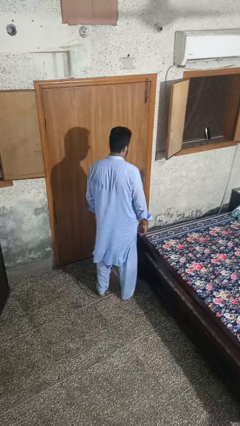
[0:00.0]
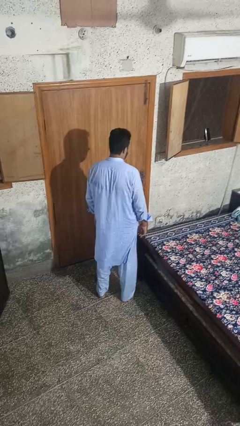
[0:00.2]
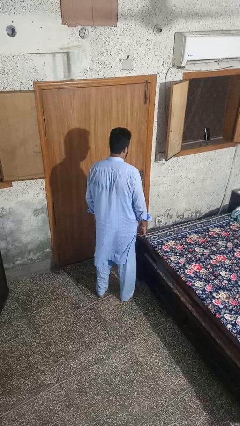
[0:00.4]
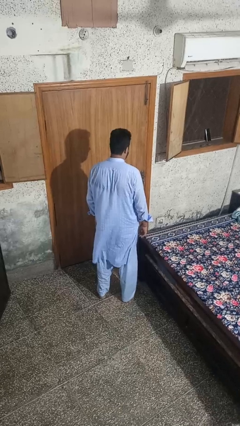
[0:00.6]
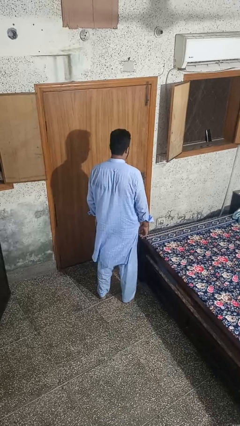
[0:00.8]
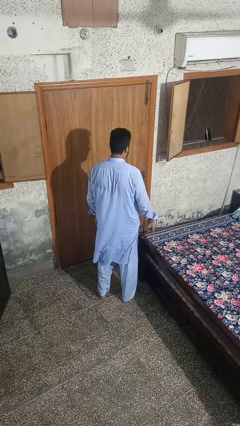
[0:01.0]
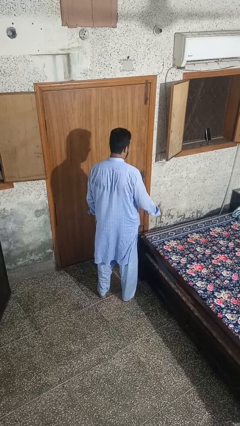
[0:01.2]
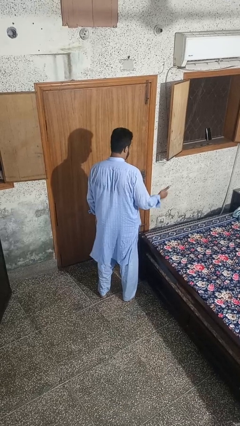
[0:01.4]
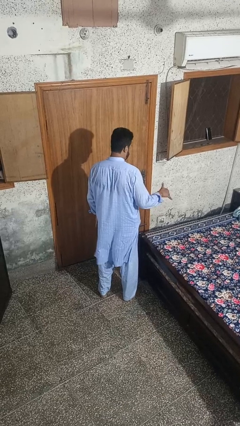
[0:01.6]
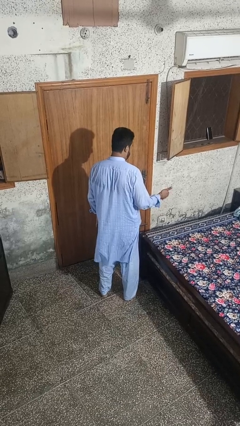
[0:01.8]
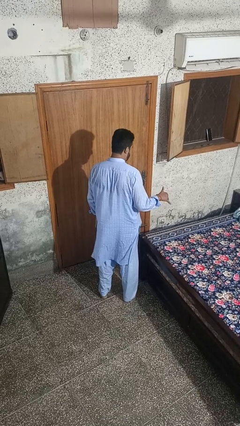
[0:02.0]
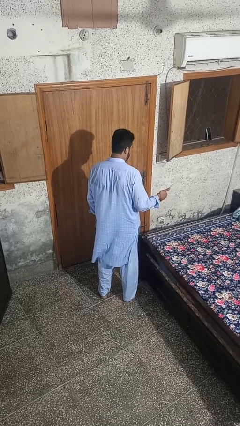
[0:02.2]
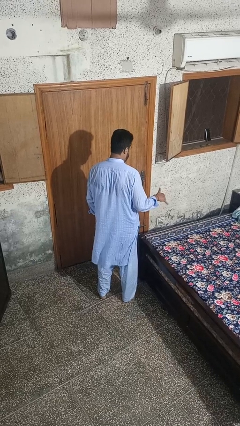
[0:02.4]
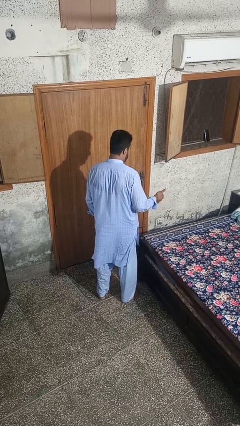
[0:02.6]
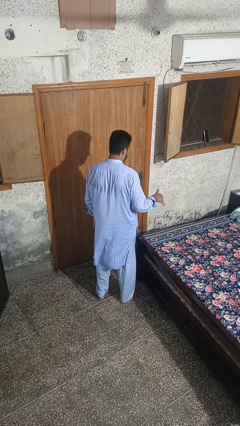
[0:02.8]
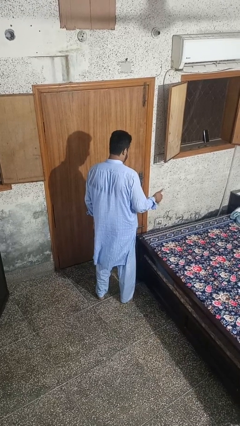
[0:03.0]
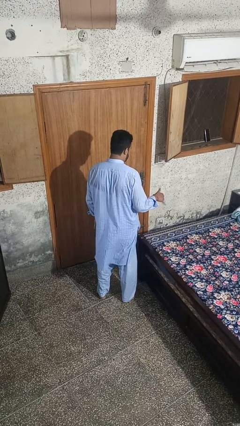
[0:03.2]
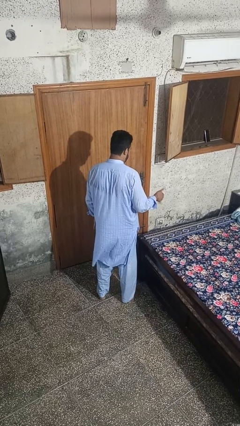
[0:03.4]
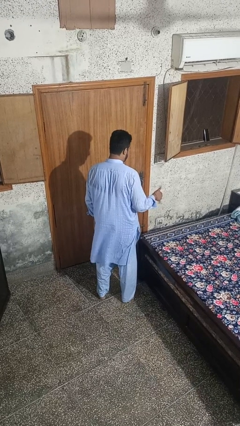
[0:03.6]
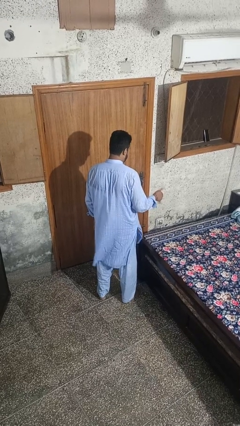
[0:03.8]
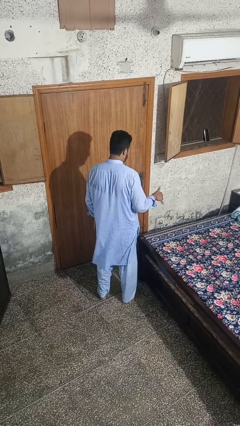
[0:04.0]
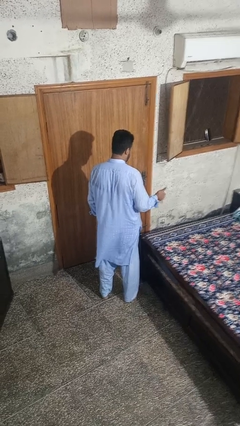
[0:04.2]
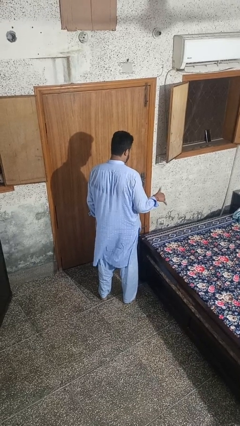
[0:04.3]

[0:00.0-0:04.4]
person gestures hang loose

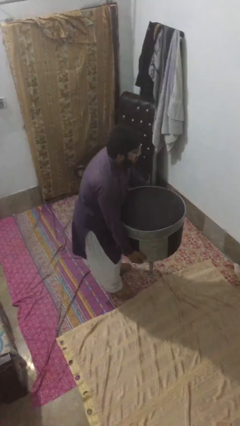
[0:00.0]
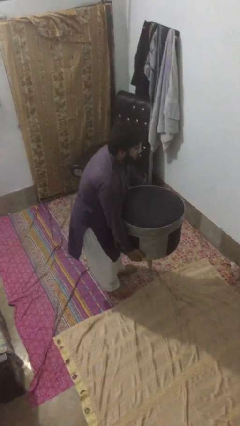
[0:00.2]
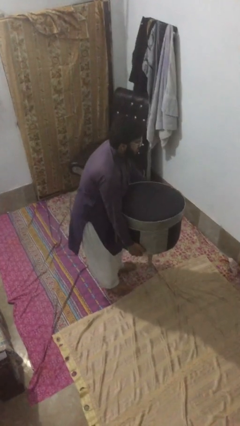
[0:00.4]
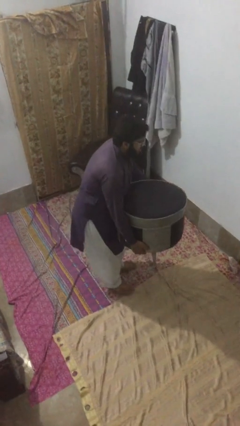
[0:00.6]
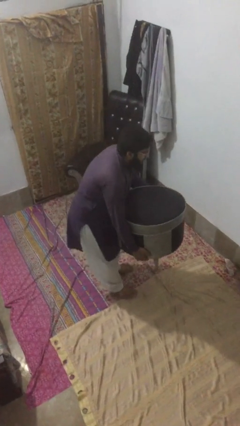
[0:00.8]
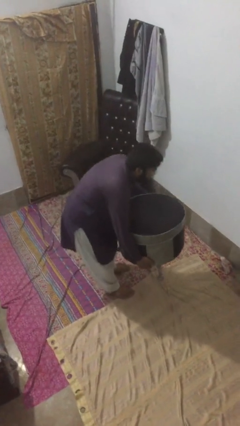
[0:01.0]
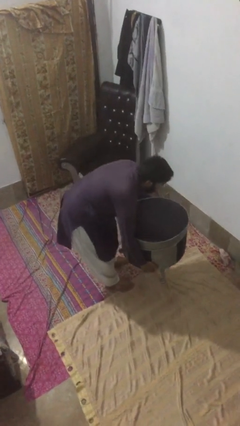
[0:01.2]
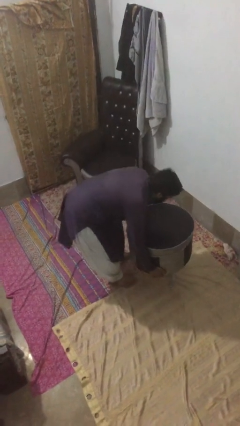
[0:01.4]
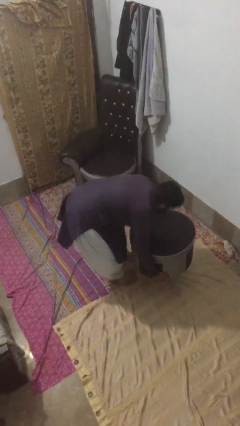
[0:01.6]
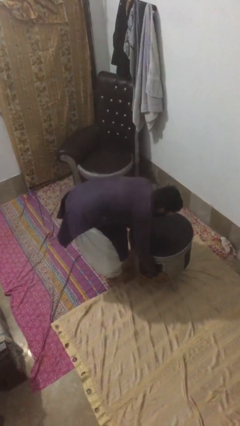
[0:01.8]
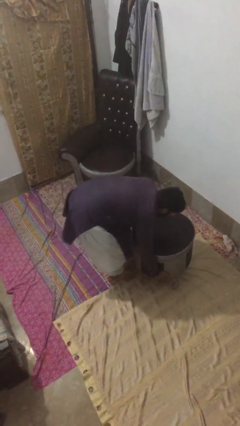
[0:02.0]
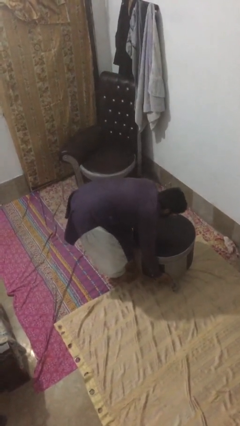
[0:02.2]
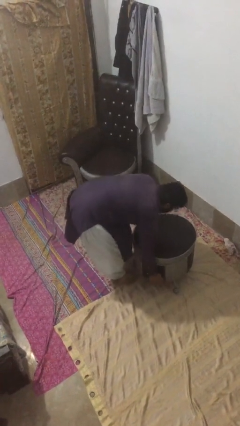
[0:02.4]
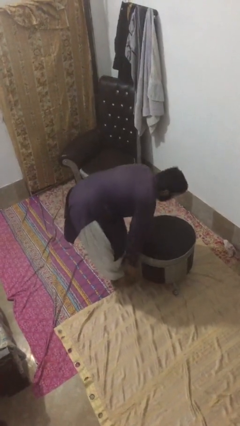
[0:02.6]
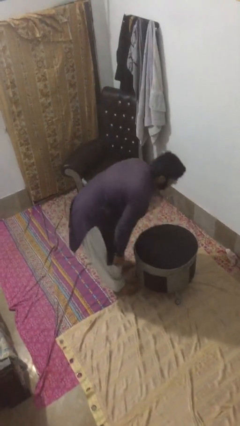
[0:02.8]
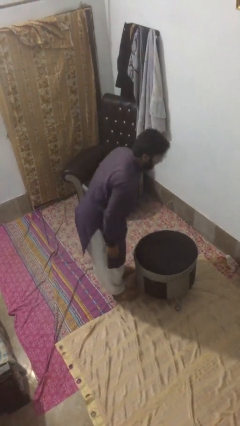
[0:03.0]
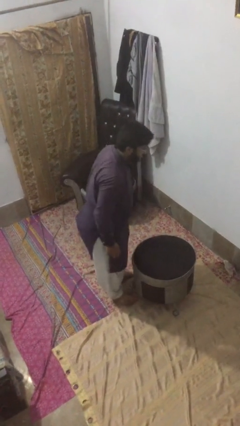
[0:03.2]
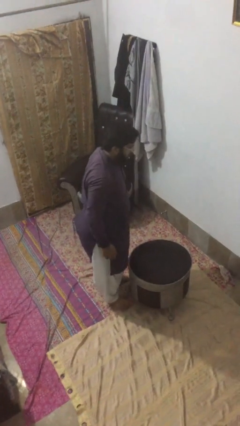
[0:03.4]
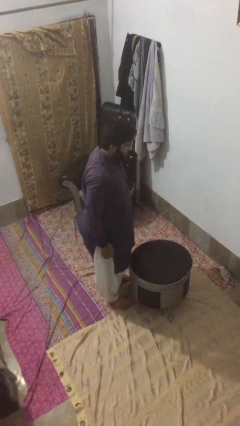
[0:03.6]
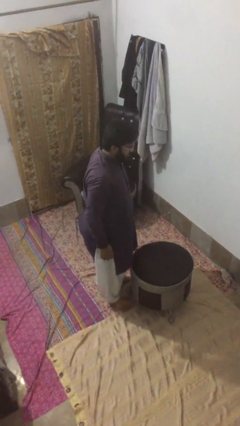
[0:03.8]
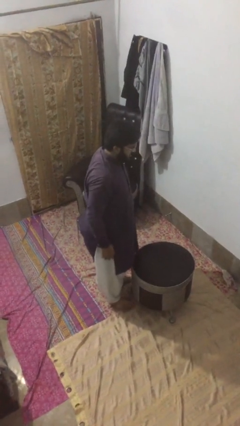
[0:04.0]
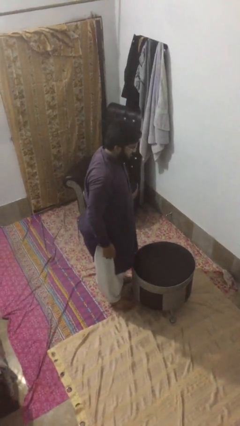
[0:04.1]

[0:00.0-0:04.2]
person puts down object on floor

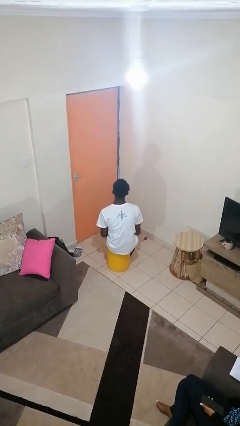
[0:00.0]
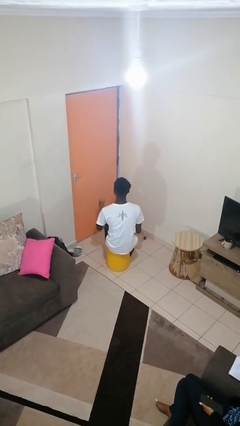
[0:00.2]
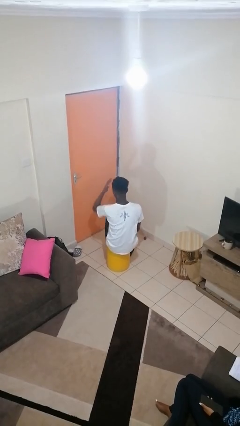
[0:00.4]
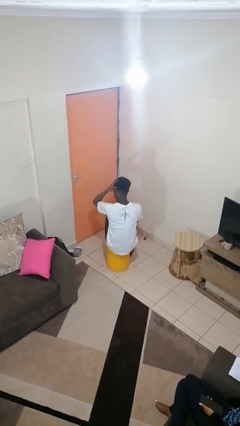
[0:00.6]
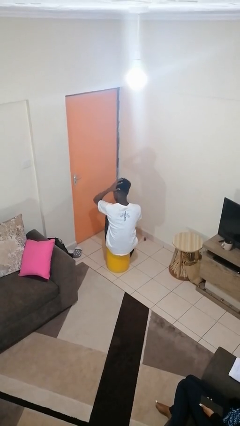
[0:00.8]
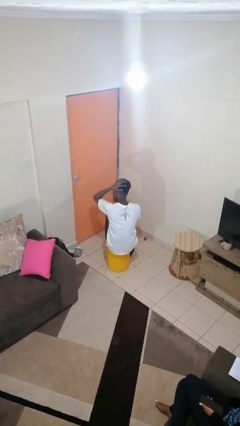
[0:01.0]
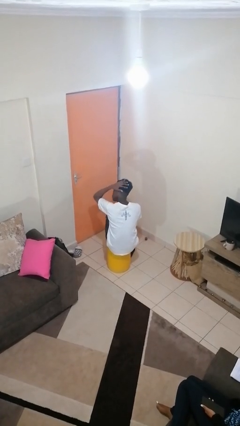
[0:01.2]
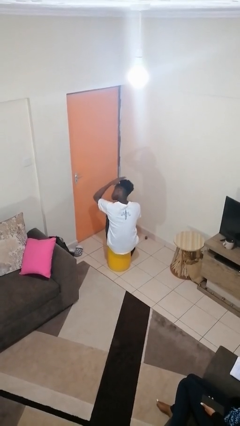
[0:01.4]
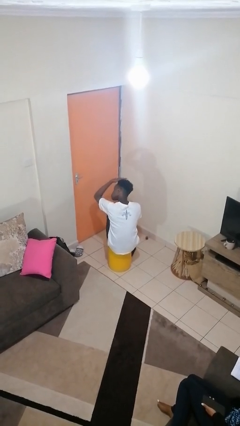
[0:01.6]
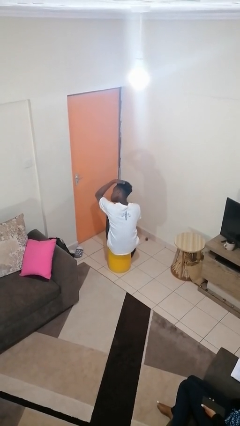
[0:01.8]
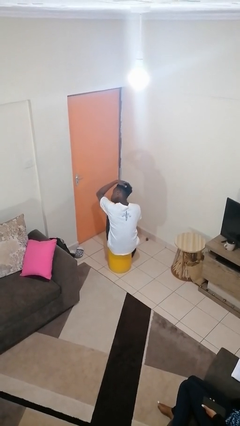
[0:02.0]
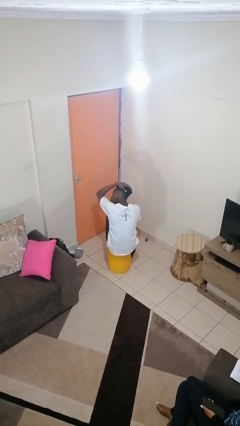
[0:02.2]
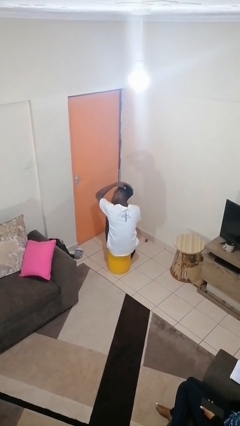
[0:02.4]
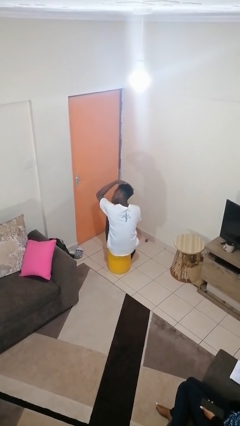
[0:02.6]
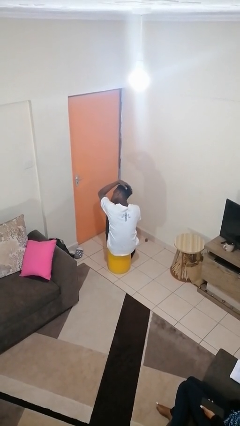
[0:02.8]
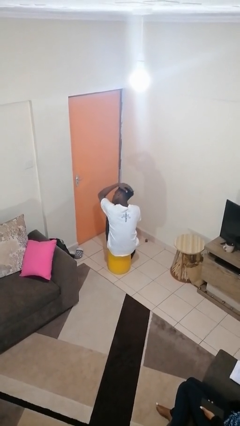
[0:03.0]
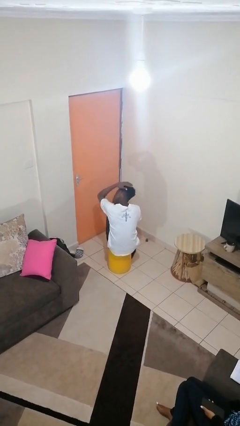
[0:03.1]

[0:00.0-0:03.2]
person strokes hair

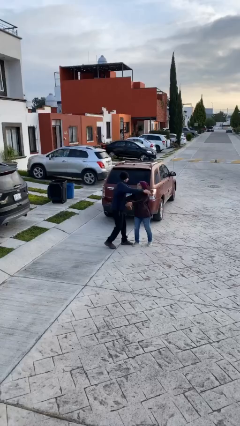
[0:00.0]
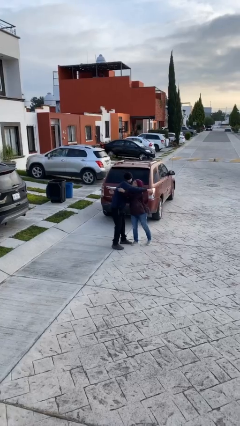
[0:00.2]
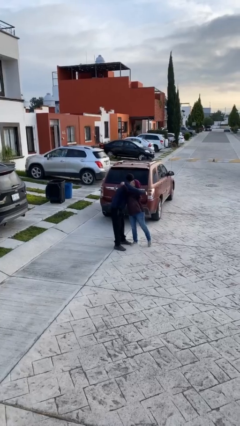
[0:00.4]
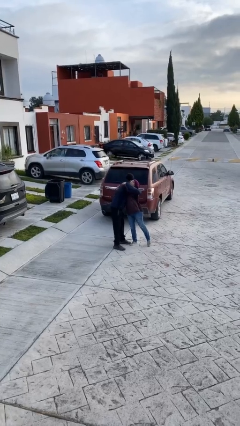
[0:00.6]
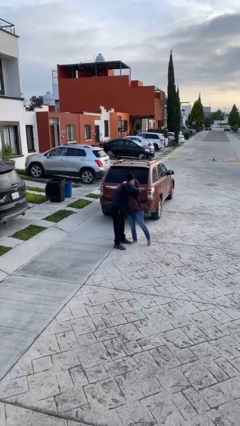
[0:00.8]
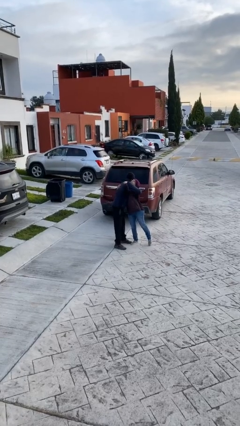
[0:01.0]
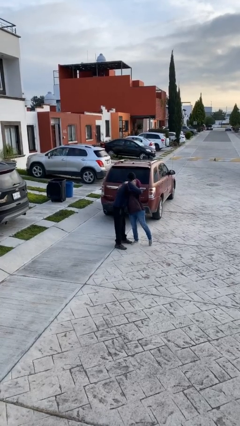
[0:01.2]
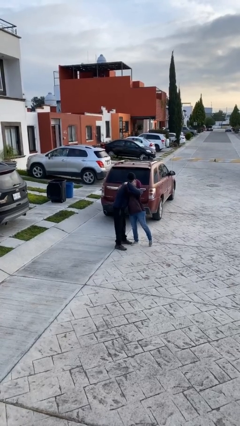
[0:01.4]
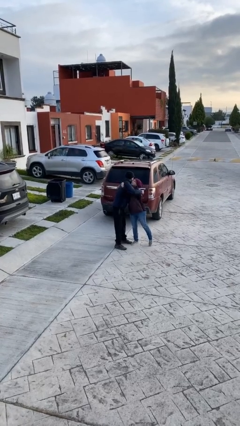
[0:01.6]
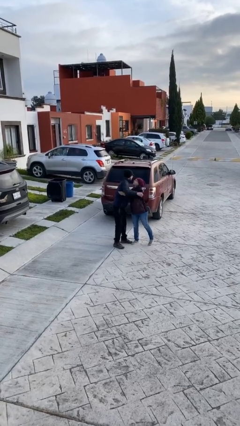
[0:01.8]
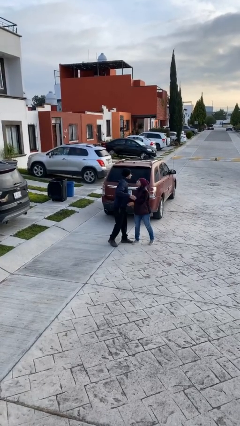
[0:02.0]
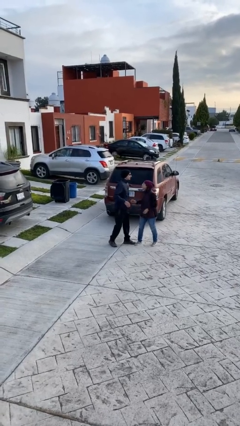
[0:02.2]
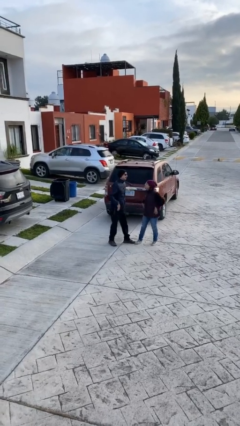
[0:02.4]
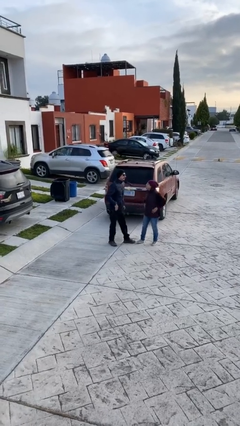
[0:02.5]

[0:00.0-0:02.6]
person embraces person

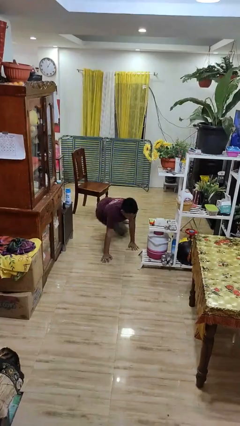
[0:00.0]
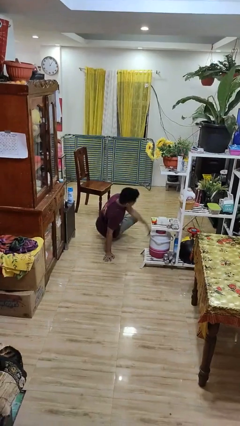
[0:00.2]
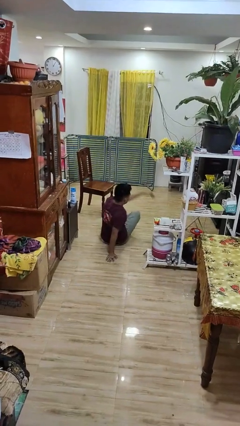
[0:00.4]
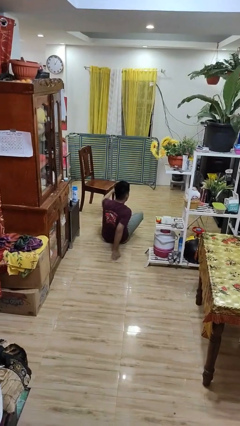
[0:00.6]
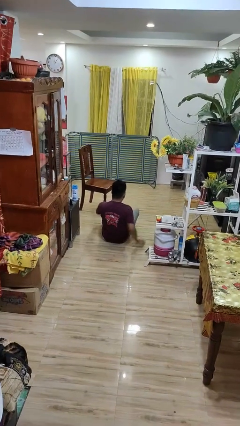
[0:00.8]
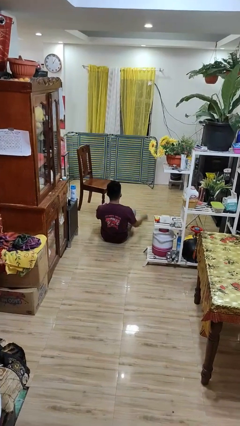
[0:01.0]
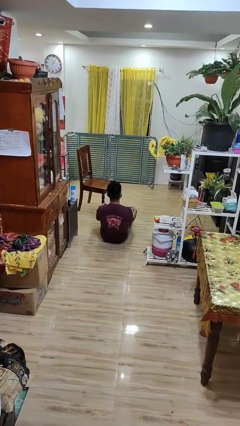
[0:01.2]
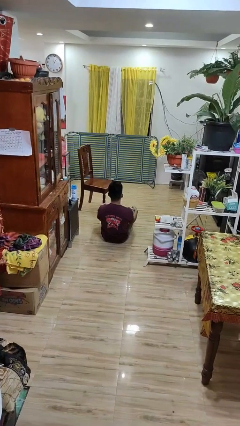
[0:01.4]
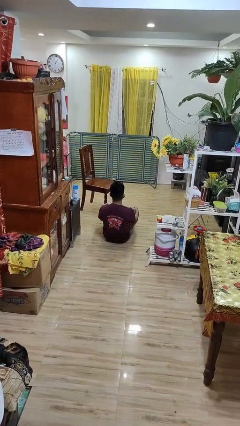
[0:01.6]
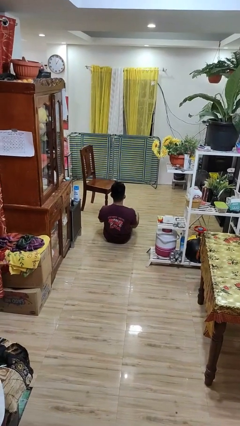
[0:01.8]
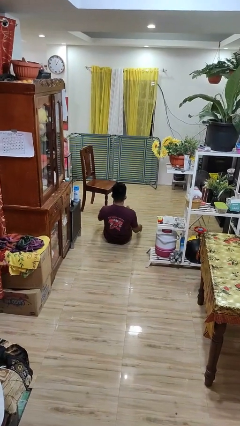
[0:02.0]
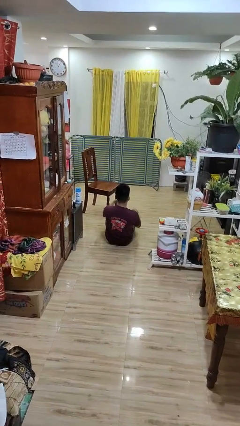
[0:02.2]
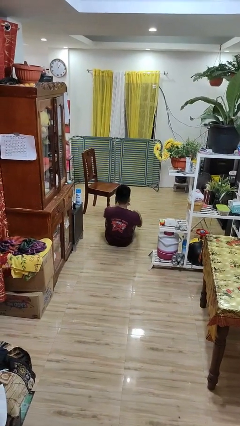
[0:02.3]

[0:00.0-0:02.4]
person lies down on floor

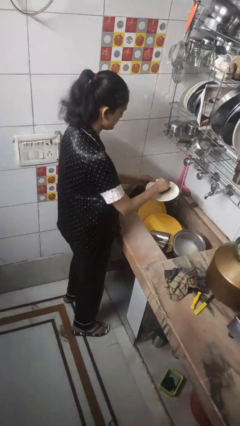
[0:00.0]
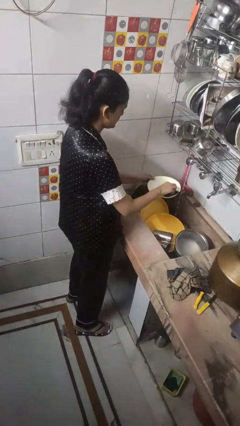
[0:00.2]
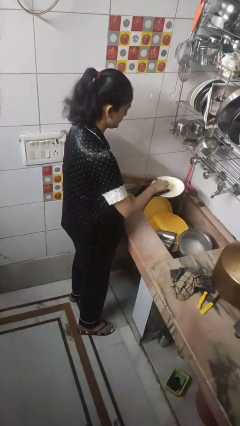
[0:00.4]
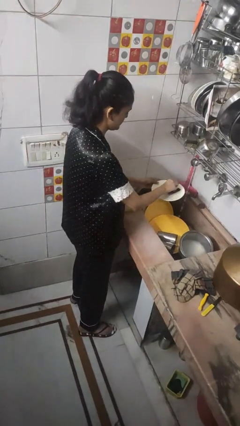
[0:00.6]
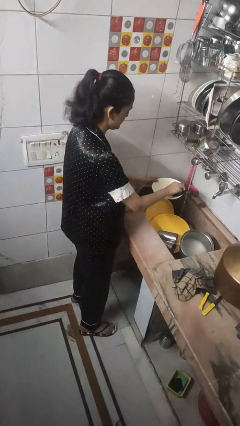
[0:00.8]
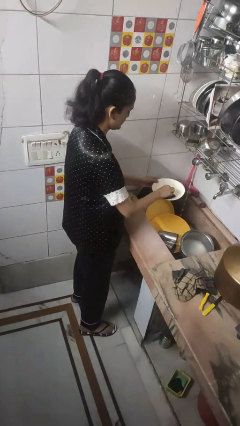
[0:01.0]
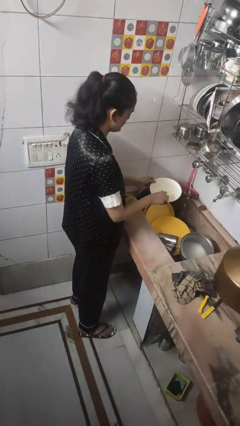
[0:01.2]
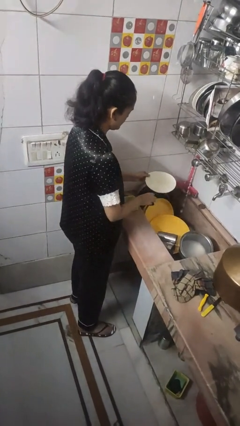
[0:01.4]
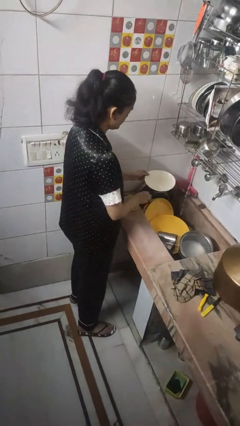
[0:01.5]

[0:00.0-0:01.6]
person washes dish
